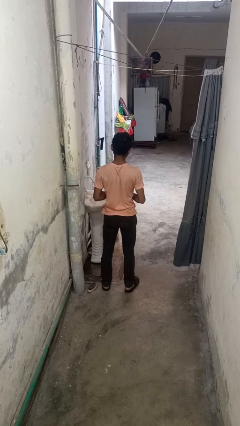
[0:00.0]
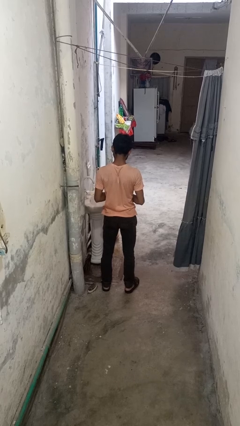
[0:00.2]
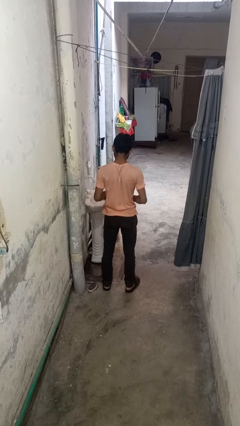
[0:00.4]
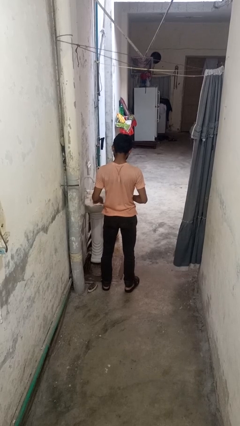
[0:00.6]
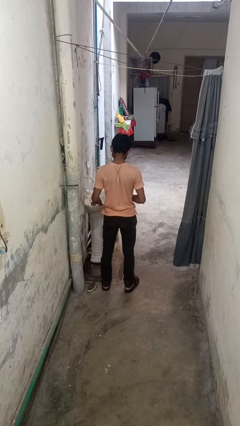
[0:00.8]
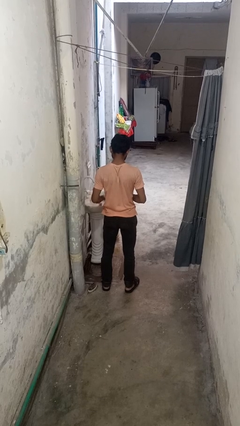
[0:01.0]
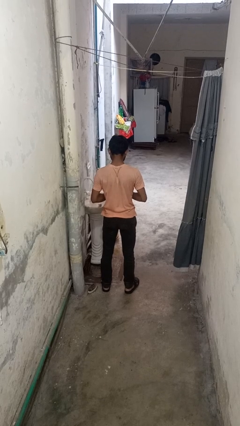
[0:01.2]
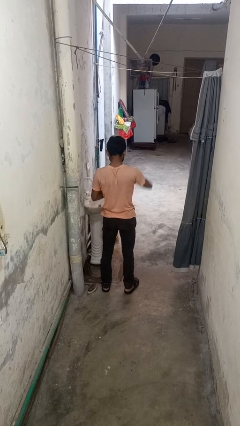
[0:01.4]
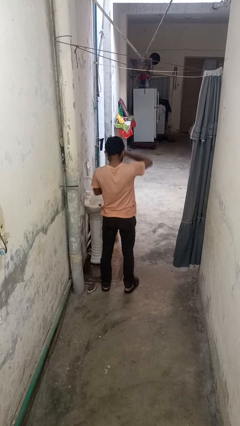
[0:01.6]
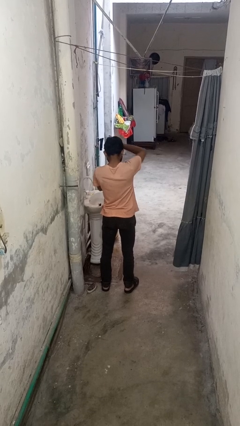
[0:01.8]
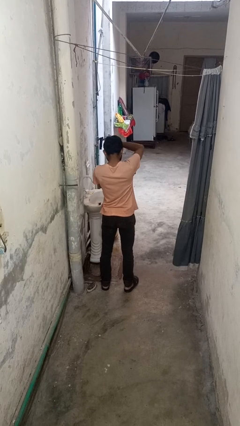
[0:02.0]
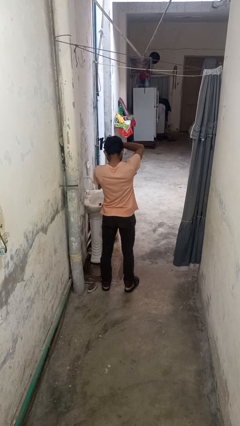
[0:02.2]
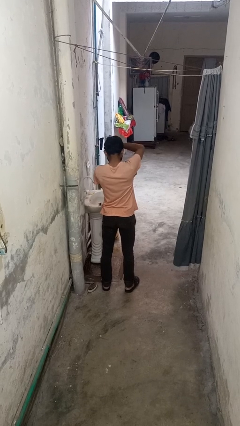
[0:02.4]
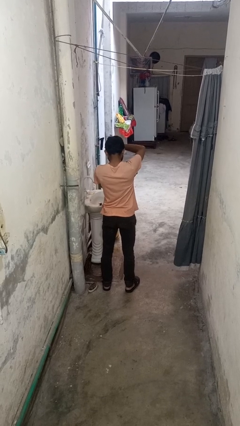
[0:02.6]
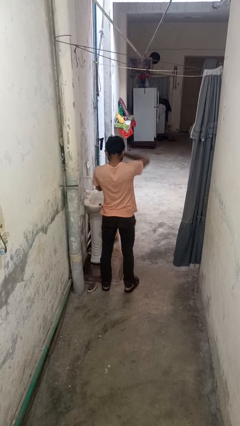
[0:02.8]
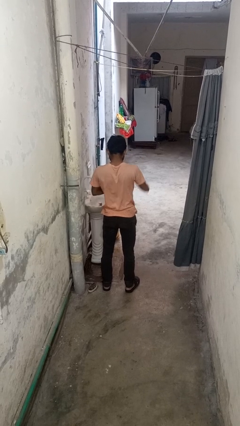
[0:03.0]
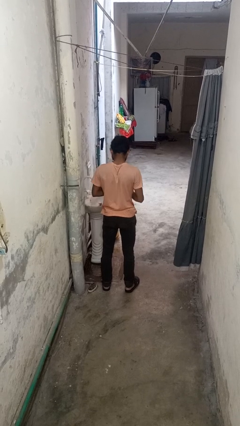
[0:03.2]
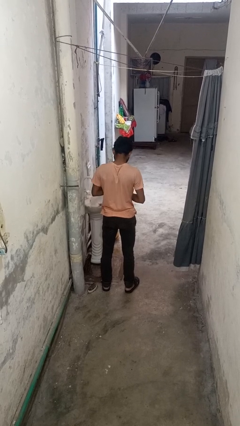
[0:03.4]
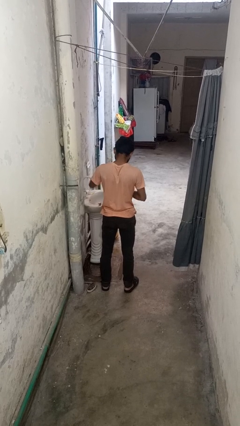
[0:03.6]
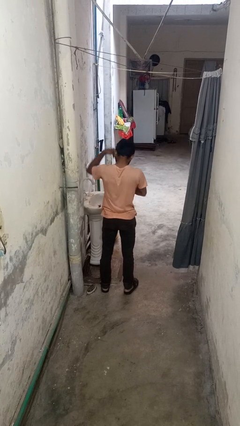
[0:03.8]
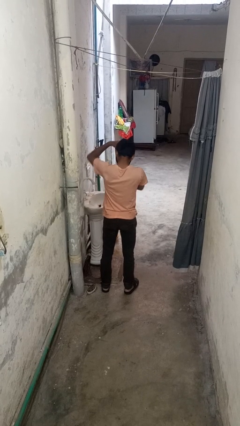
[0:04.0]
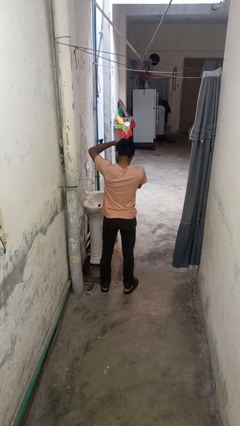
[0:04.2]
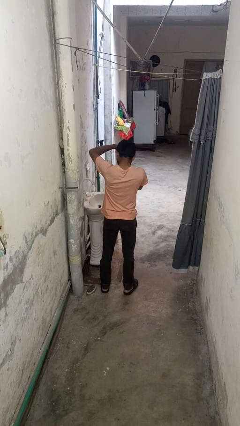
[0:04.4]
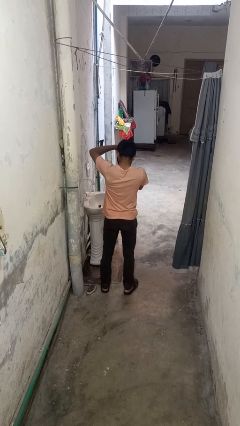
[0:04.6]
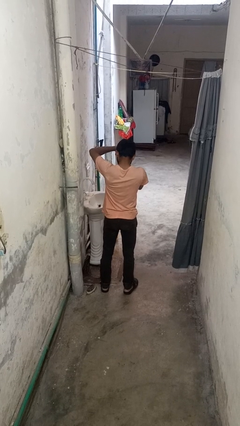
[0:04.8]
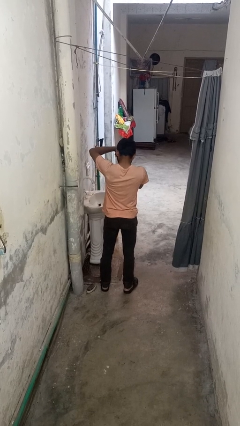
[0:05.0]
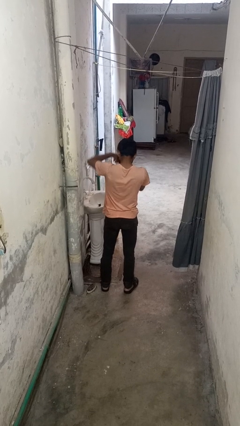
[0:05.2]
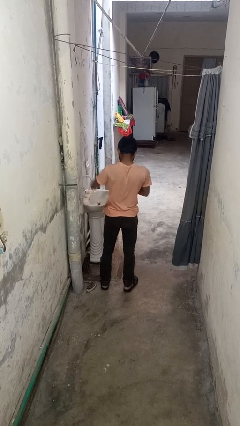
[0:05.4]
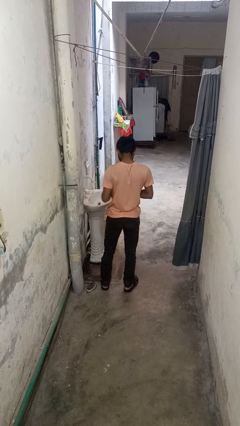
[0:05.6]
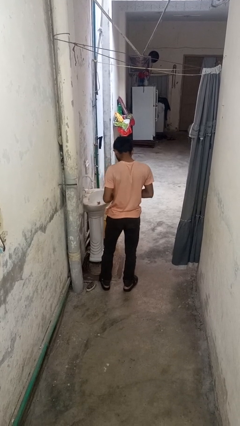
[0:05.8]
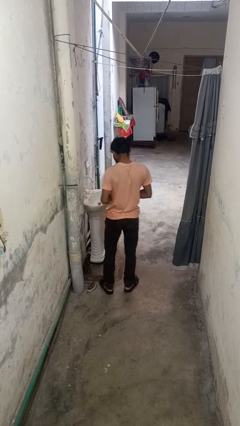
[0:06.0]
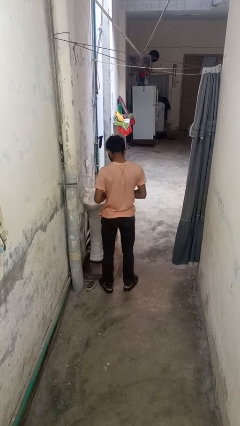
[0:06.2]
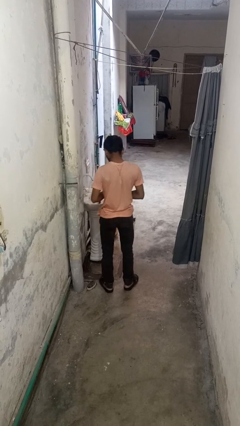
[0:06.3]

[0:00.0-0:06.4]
person applies deodorant

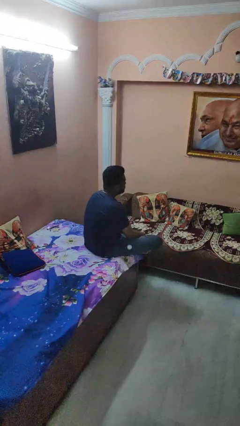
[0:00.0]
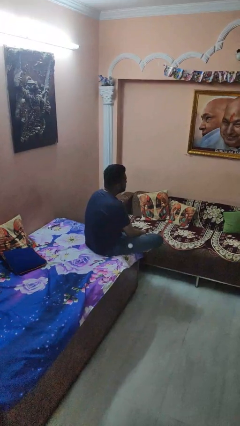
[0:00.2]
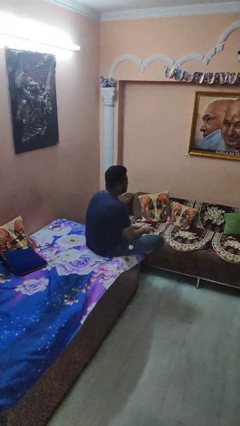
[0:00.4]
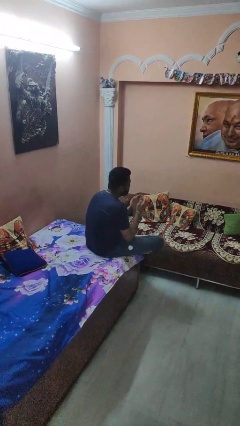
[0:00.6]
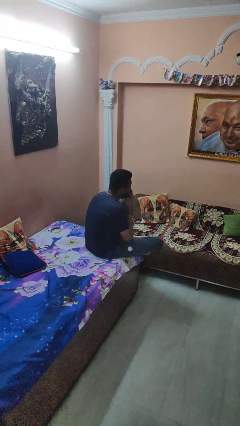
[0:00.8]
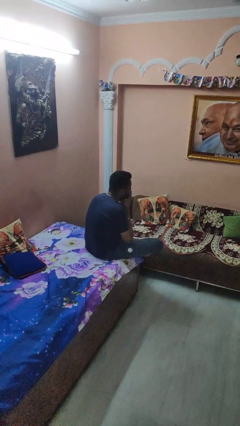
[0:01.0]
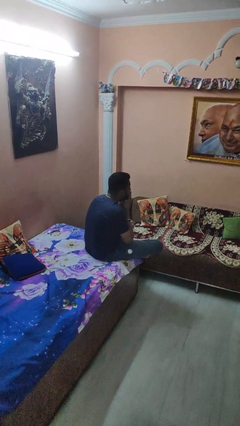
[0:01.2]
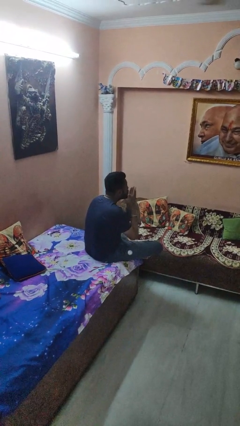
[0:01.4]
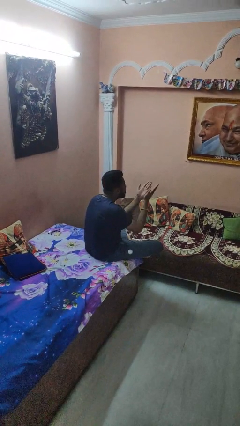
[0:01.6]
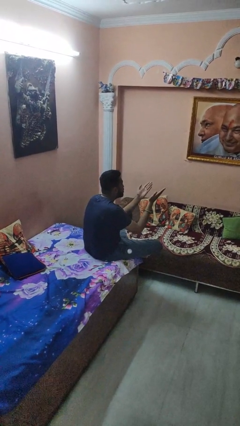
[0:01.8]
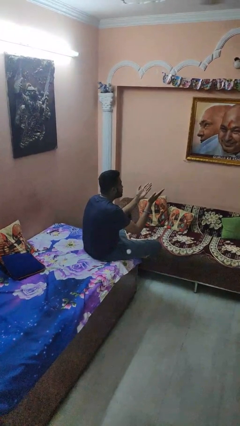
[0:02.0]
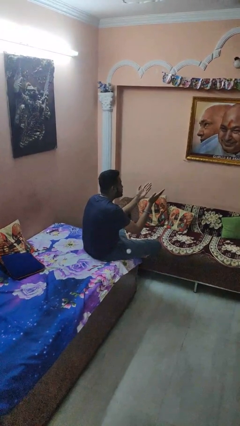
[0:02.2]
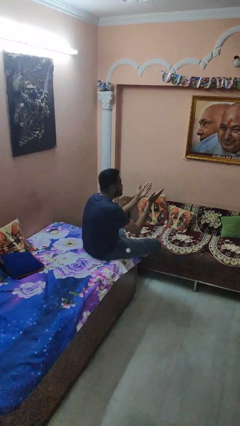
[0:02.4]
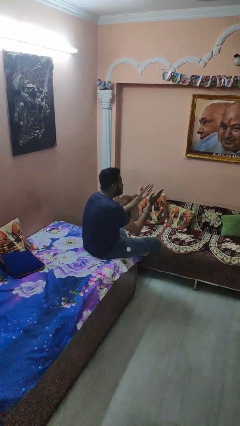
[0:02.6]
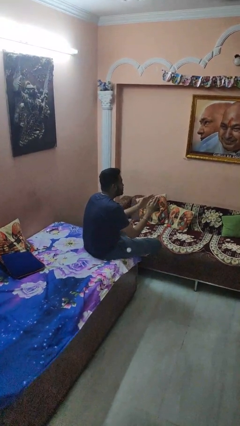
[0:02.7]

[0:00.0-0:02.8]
person gestures blow kiss

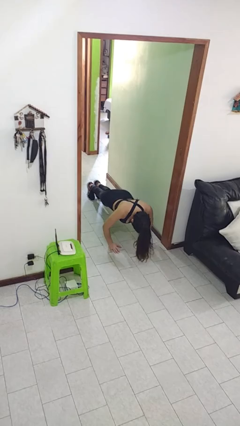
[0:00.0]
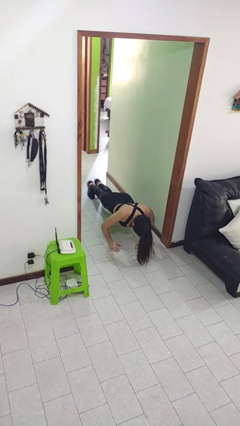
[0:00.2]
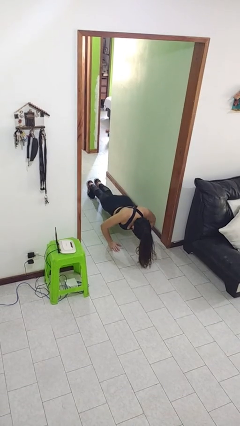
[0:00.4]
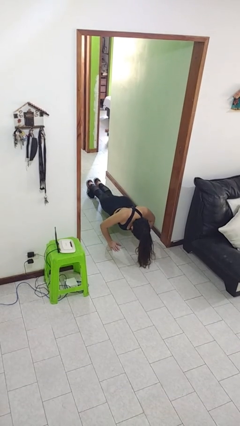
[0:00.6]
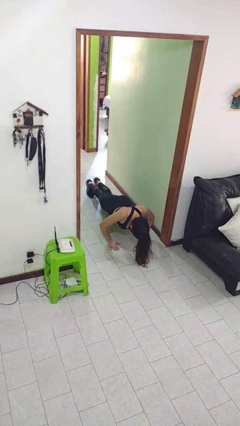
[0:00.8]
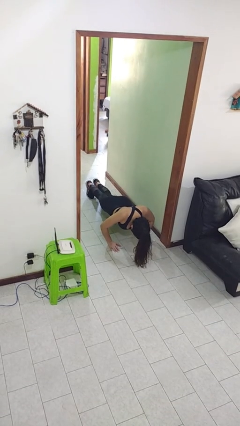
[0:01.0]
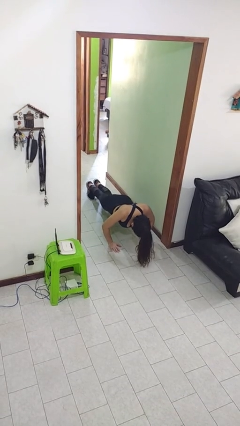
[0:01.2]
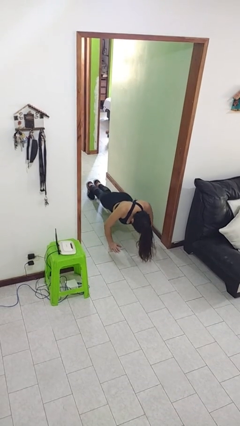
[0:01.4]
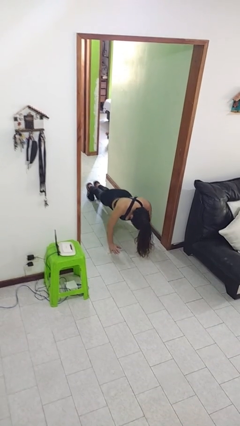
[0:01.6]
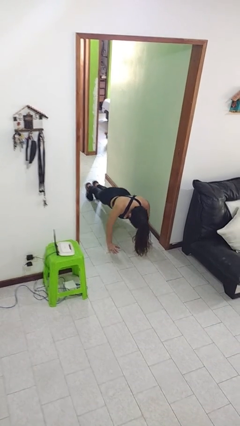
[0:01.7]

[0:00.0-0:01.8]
person exercises with pushup

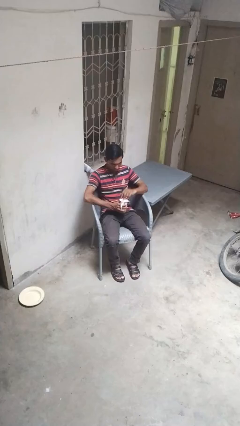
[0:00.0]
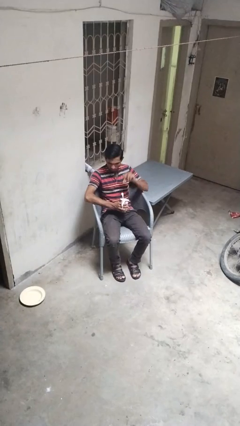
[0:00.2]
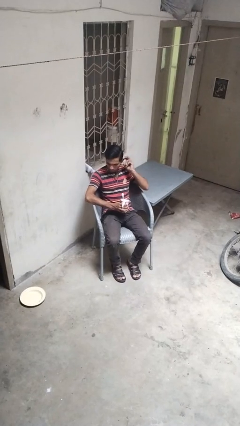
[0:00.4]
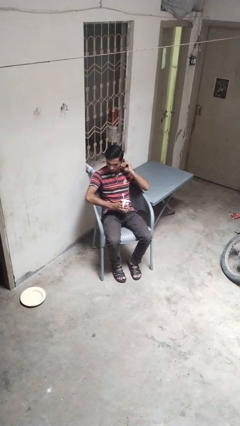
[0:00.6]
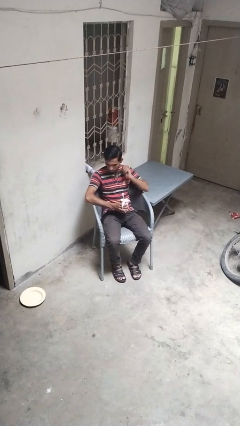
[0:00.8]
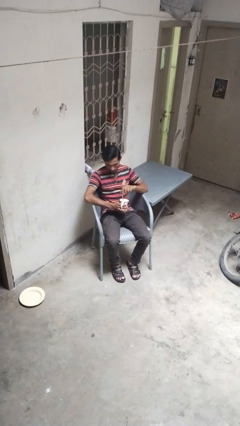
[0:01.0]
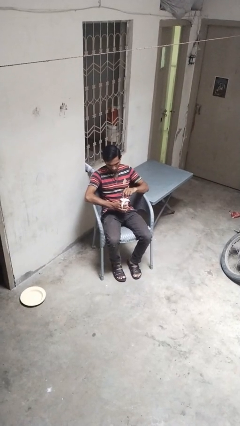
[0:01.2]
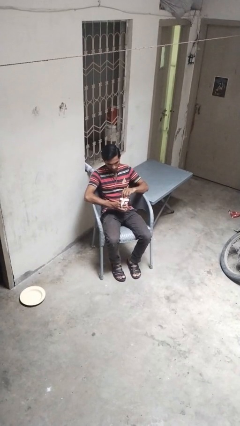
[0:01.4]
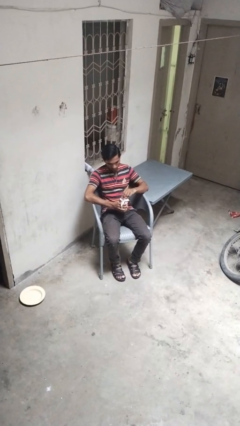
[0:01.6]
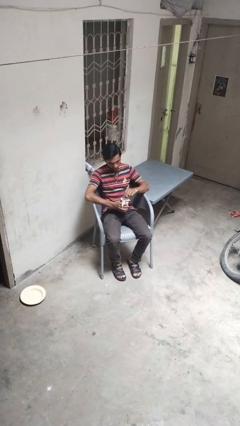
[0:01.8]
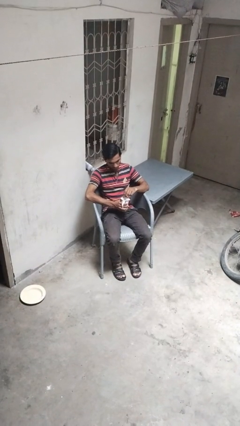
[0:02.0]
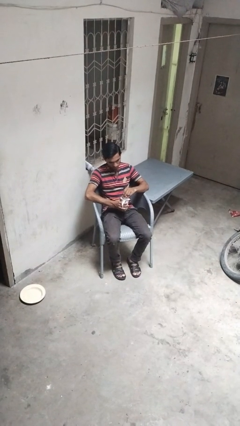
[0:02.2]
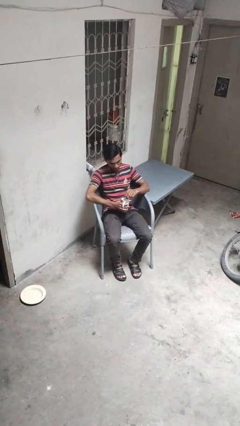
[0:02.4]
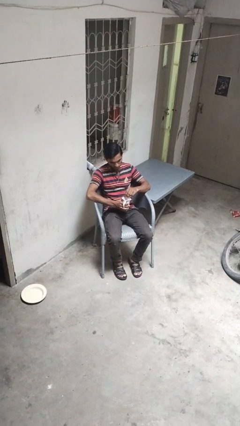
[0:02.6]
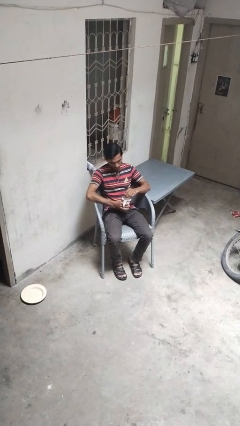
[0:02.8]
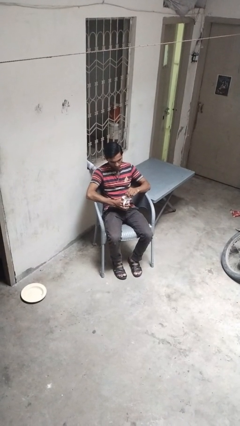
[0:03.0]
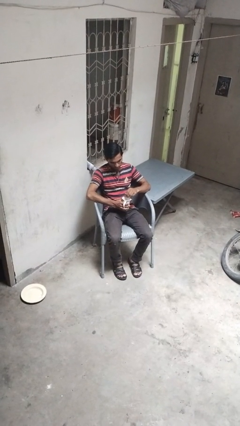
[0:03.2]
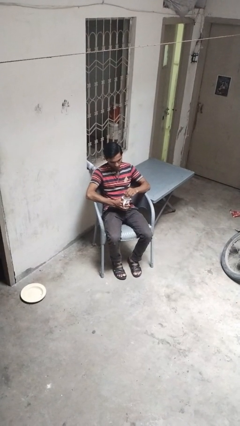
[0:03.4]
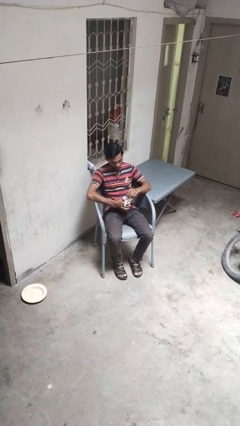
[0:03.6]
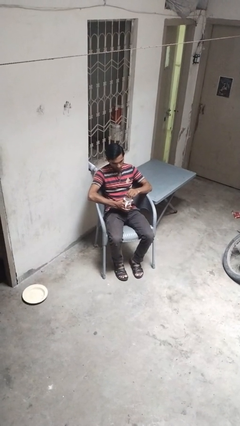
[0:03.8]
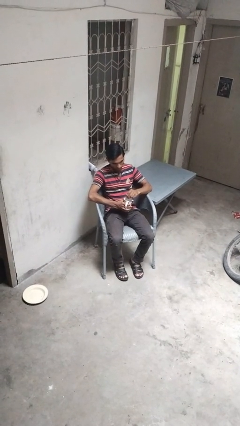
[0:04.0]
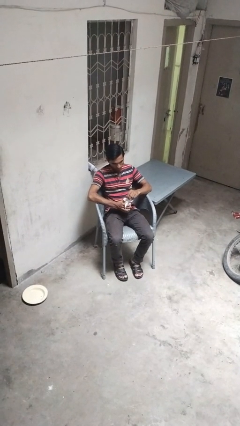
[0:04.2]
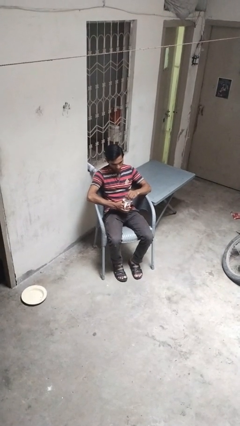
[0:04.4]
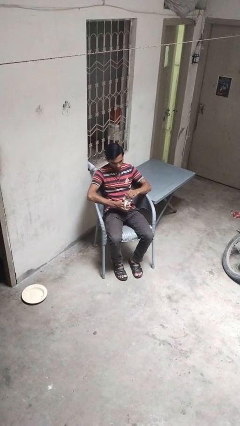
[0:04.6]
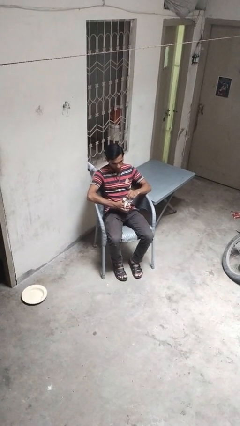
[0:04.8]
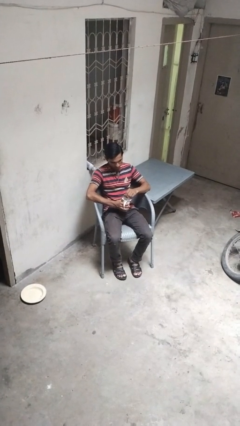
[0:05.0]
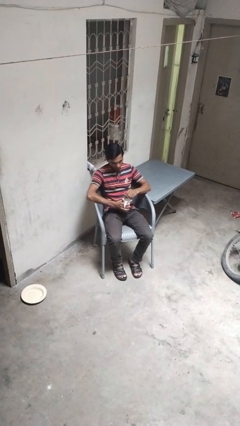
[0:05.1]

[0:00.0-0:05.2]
person stirs mug

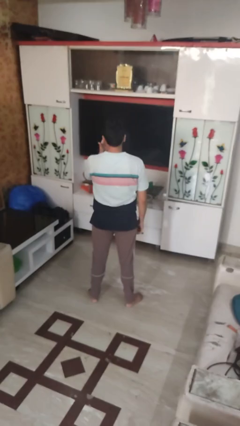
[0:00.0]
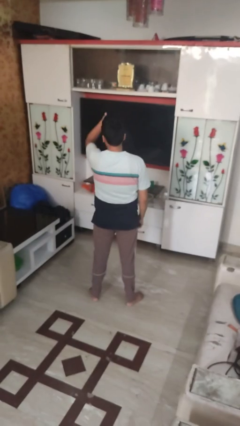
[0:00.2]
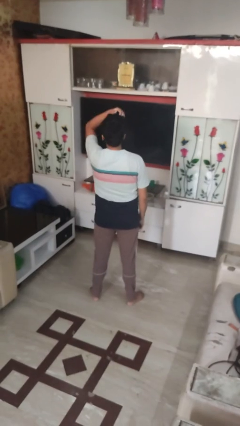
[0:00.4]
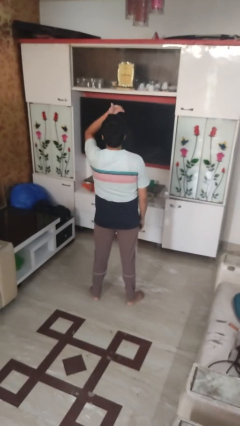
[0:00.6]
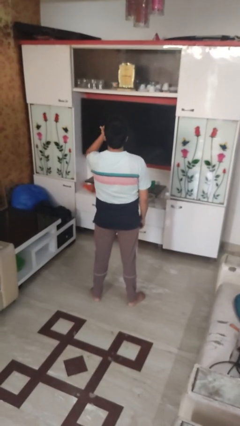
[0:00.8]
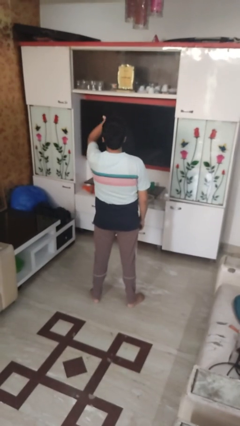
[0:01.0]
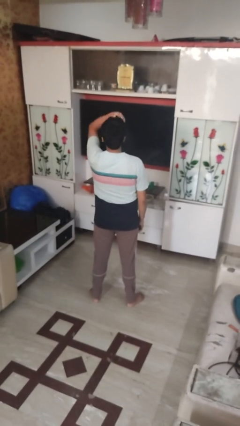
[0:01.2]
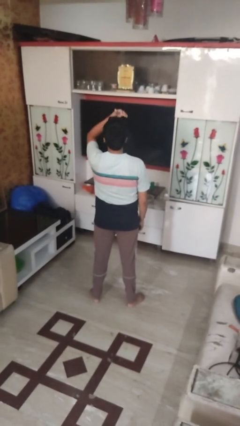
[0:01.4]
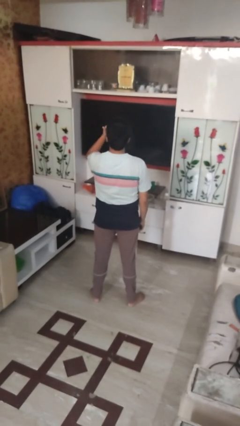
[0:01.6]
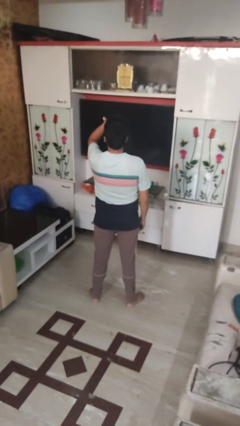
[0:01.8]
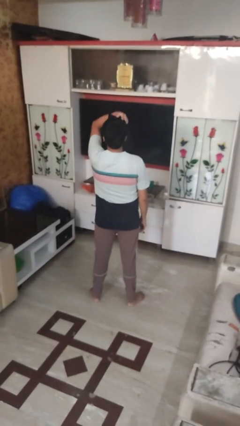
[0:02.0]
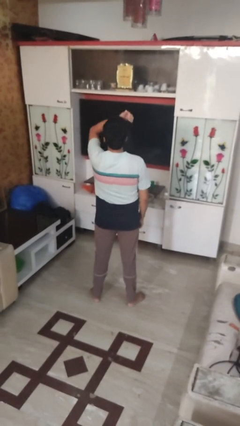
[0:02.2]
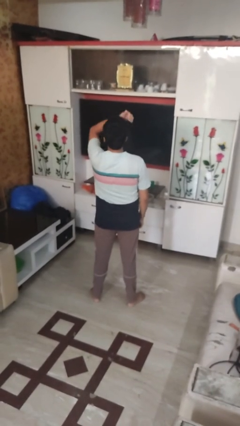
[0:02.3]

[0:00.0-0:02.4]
person strokes hair
